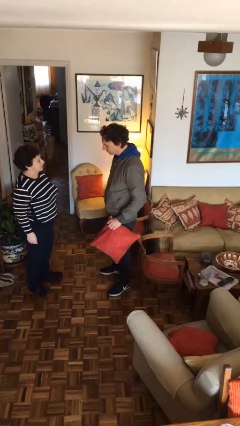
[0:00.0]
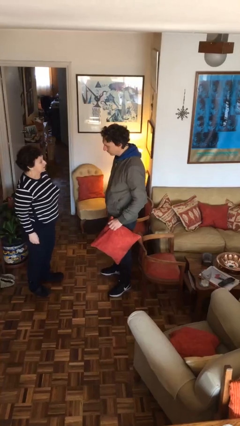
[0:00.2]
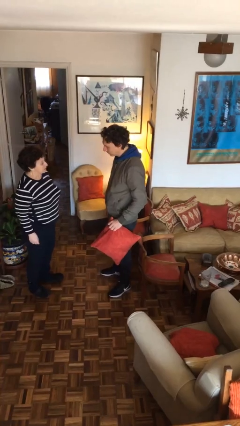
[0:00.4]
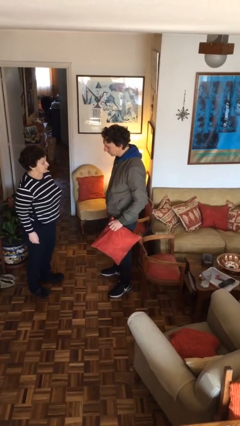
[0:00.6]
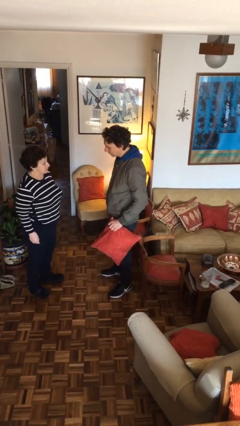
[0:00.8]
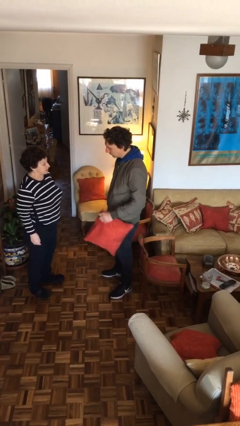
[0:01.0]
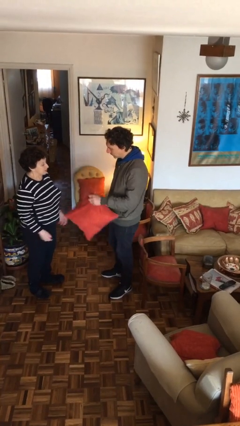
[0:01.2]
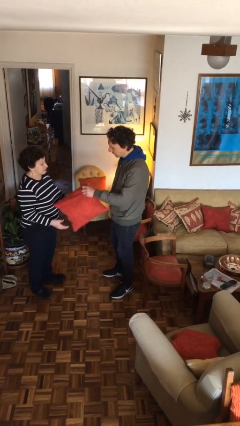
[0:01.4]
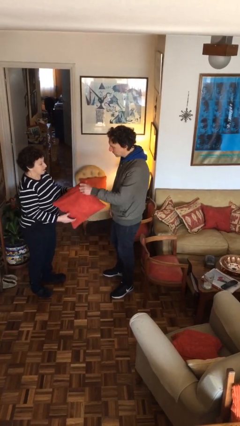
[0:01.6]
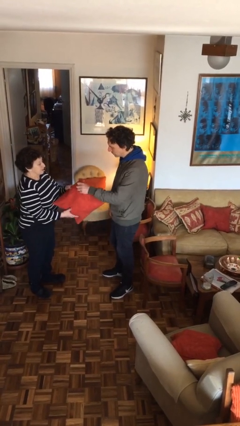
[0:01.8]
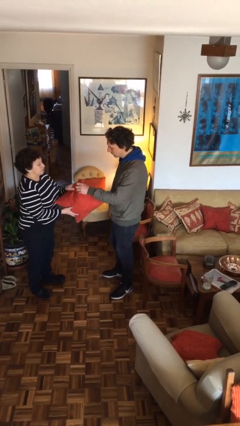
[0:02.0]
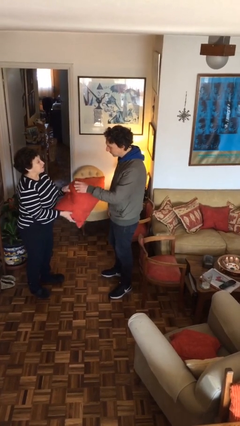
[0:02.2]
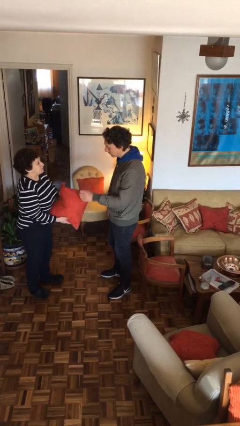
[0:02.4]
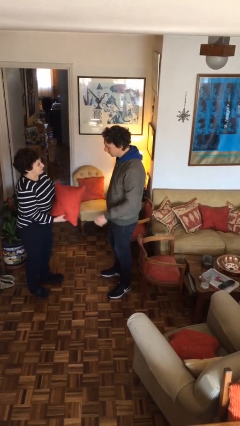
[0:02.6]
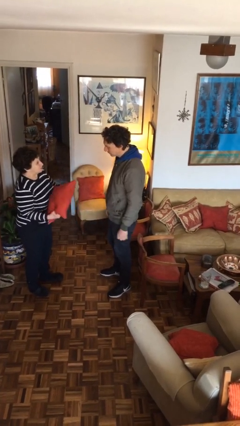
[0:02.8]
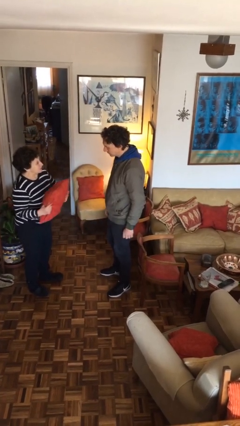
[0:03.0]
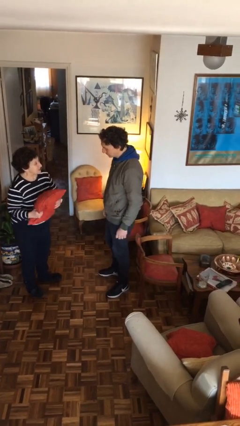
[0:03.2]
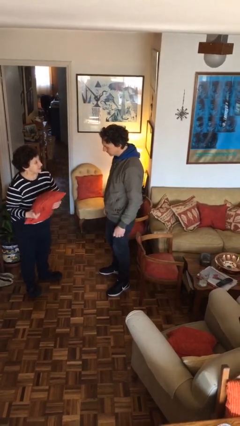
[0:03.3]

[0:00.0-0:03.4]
person transfers object to person

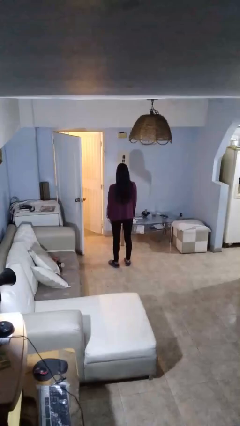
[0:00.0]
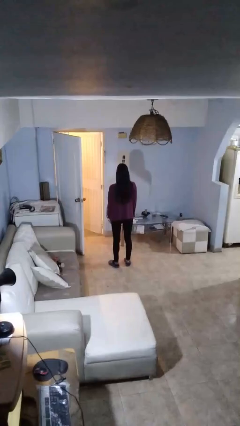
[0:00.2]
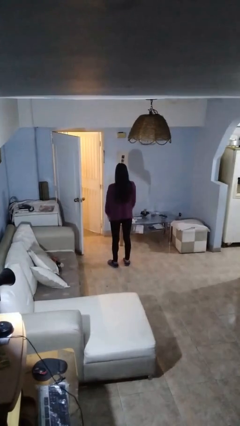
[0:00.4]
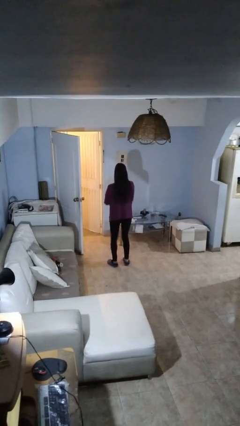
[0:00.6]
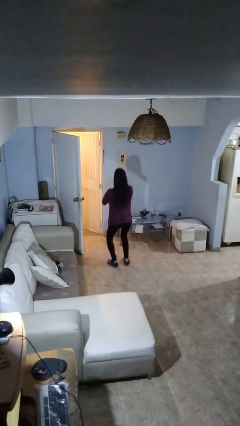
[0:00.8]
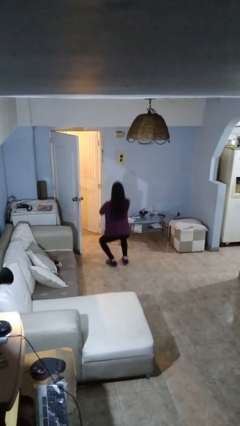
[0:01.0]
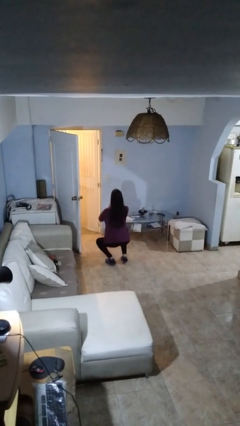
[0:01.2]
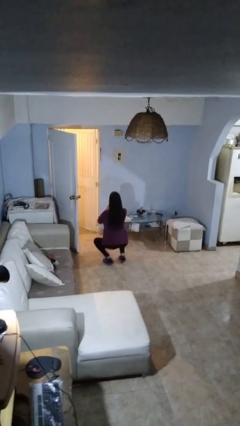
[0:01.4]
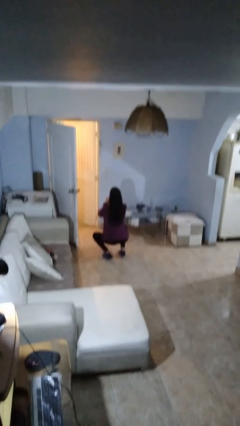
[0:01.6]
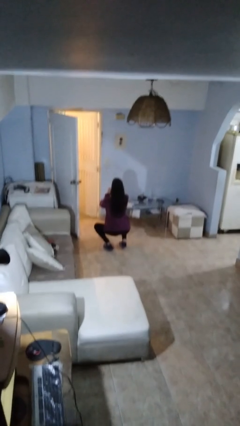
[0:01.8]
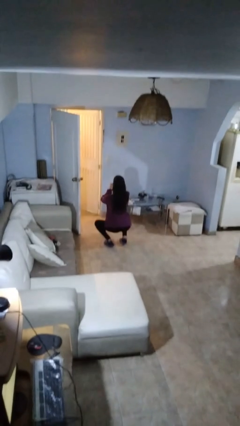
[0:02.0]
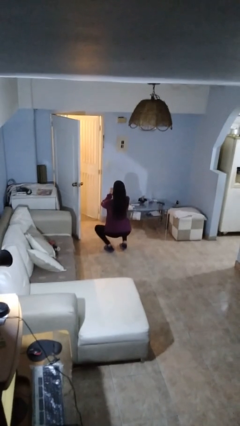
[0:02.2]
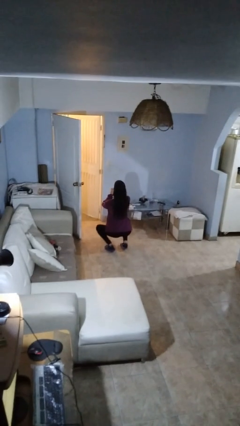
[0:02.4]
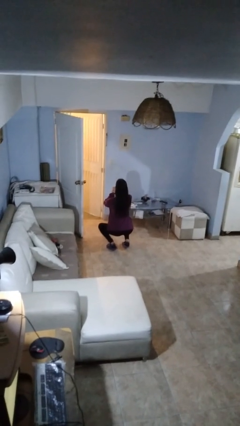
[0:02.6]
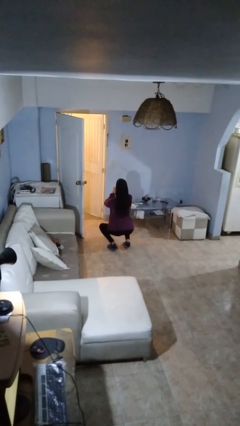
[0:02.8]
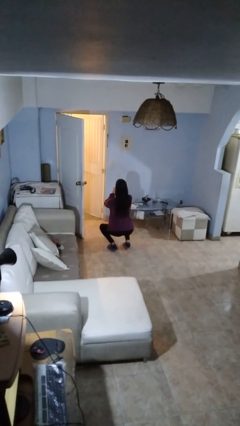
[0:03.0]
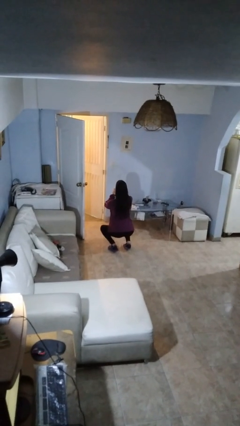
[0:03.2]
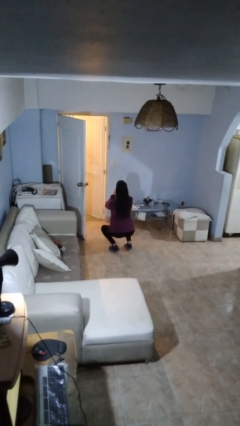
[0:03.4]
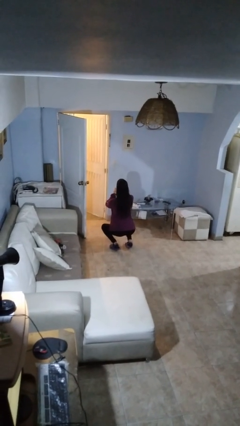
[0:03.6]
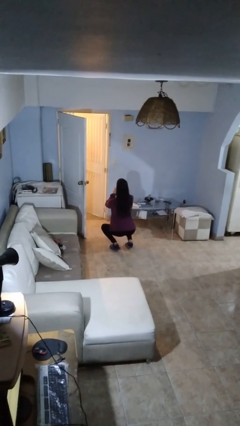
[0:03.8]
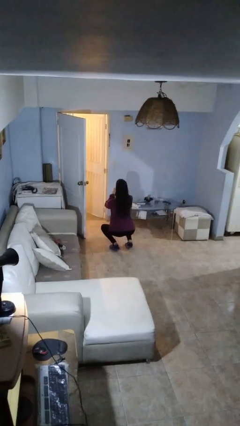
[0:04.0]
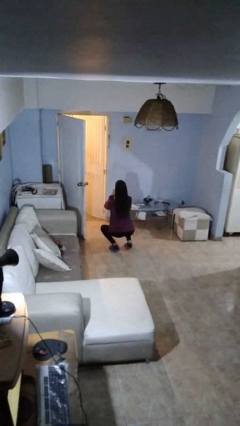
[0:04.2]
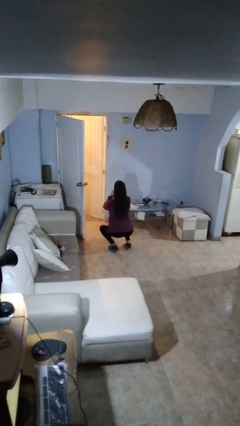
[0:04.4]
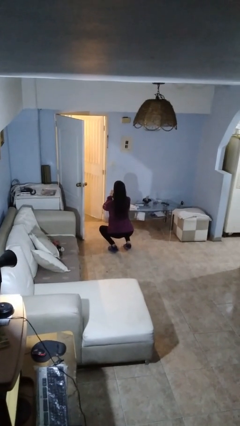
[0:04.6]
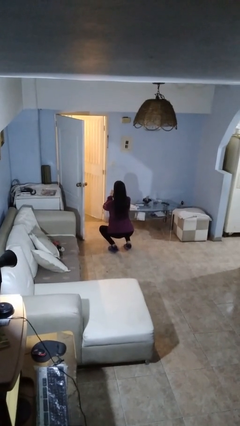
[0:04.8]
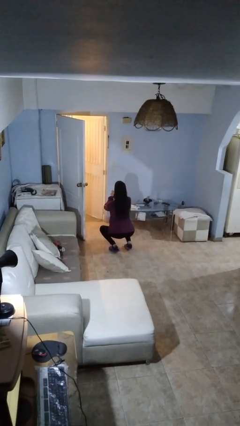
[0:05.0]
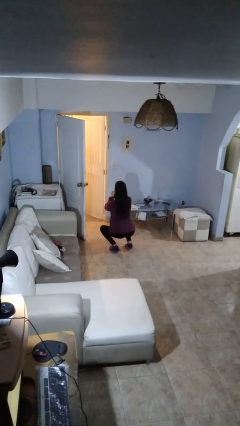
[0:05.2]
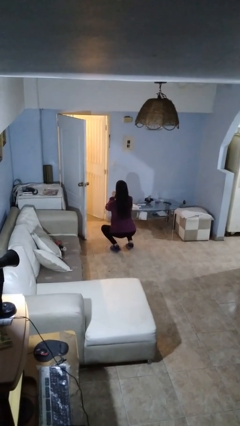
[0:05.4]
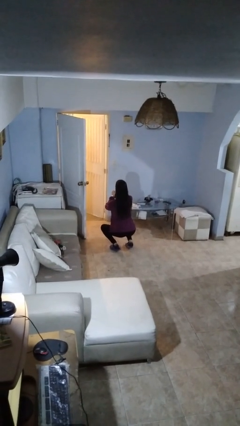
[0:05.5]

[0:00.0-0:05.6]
person squats

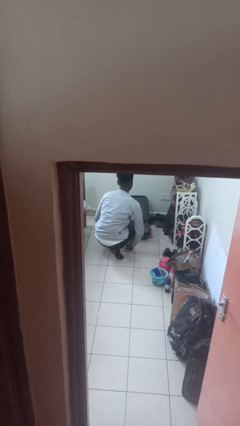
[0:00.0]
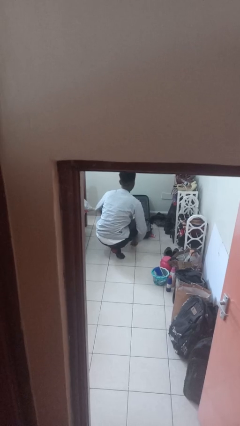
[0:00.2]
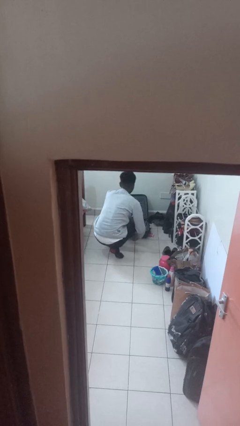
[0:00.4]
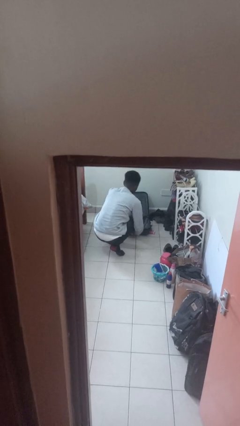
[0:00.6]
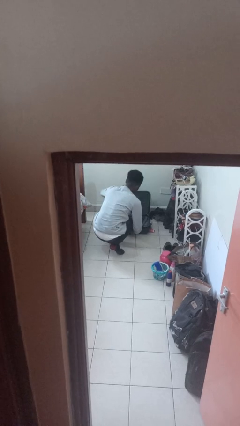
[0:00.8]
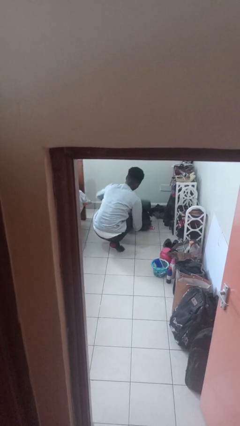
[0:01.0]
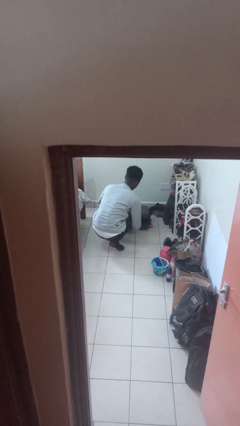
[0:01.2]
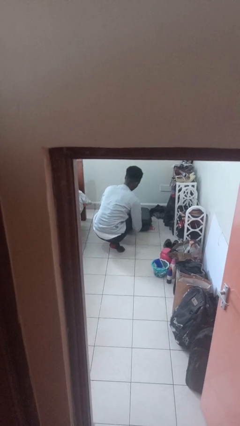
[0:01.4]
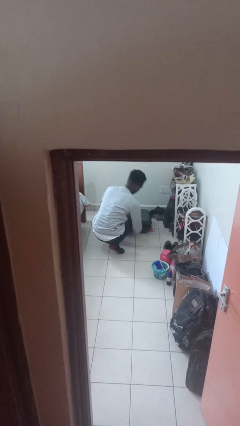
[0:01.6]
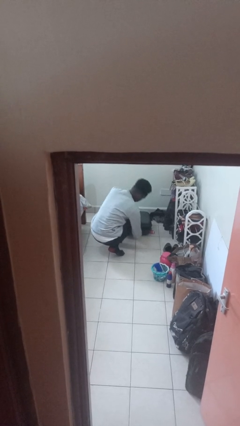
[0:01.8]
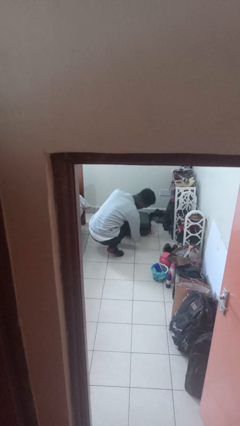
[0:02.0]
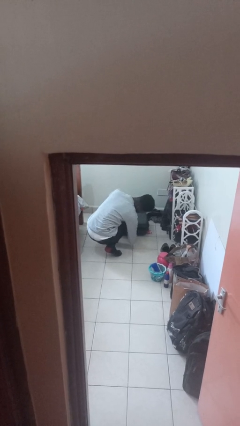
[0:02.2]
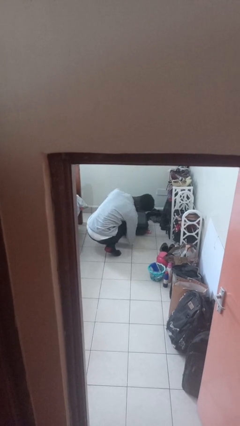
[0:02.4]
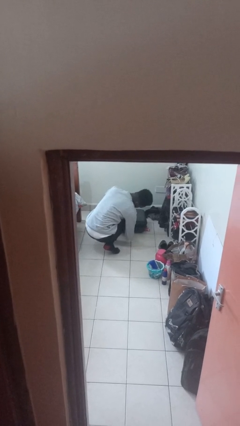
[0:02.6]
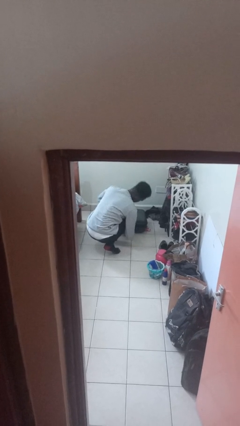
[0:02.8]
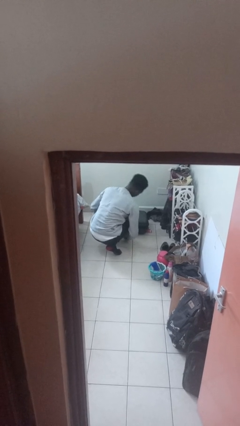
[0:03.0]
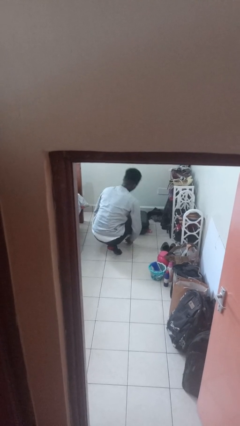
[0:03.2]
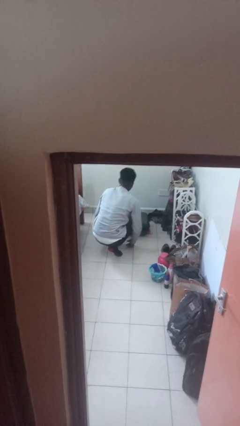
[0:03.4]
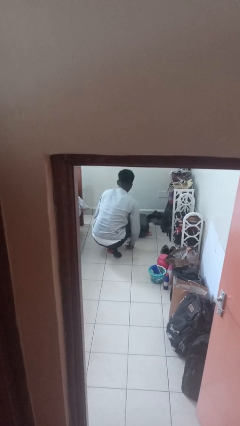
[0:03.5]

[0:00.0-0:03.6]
person closes suitcase

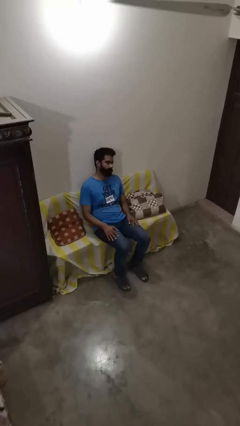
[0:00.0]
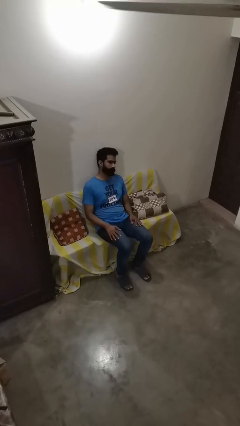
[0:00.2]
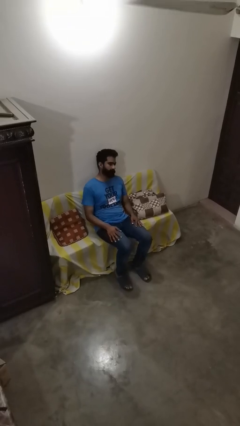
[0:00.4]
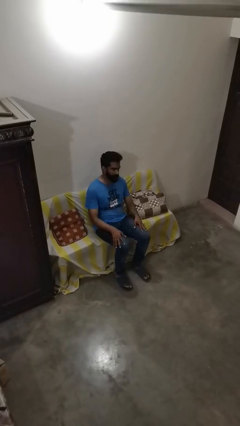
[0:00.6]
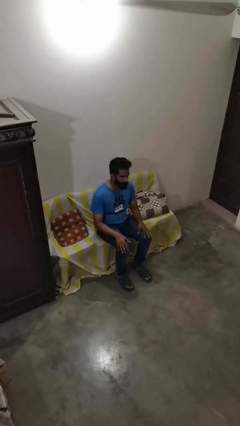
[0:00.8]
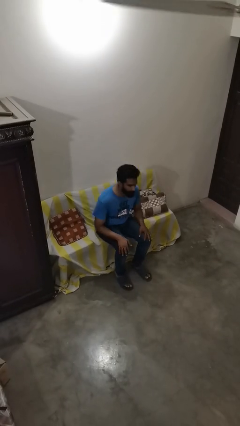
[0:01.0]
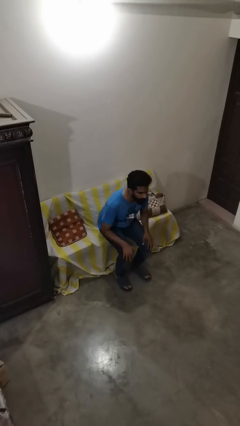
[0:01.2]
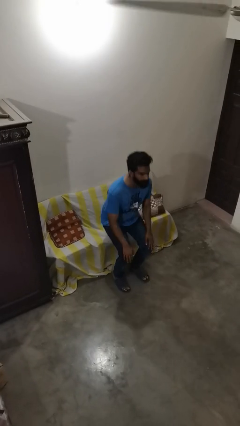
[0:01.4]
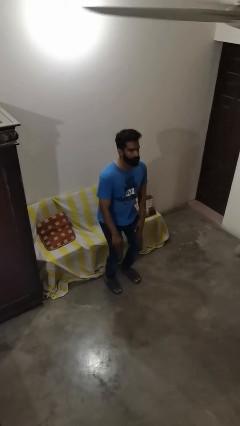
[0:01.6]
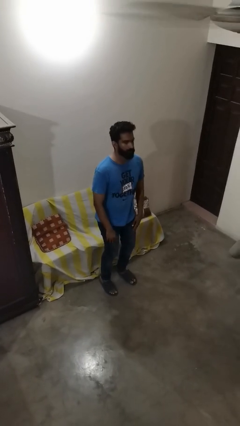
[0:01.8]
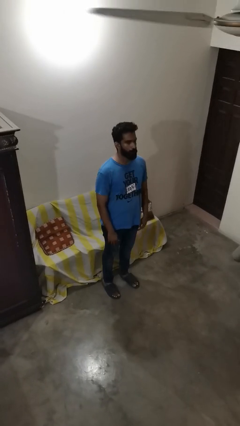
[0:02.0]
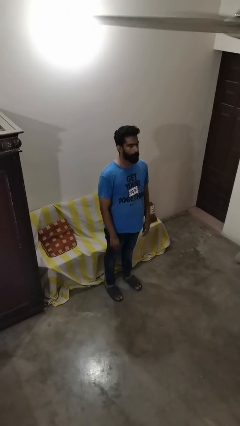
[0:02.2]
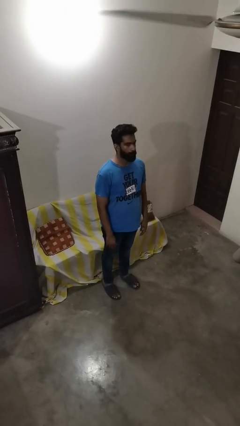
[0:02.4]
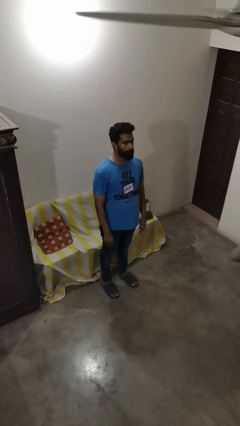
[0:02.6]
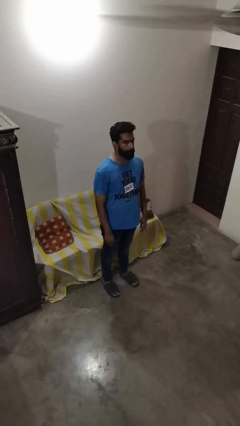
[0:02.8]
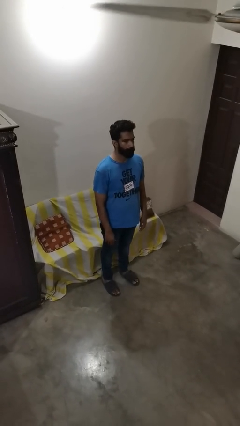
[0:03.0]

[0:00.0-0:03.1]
person stands up

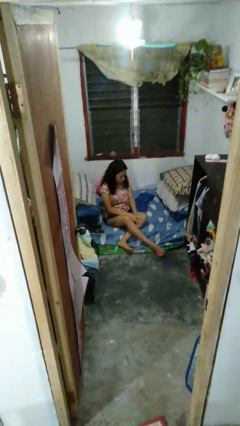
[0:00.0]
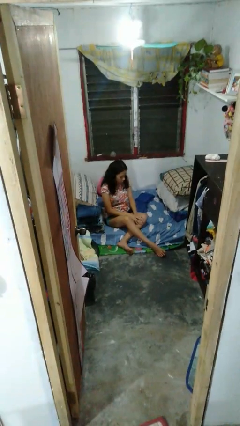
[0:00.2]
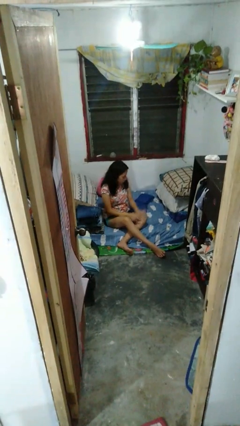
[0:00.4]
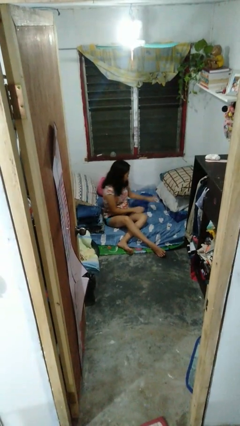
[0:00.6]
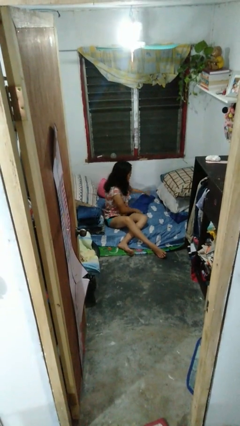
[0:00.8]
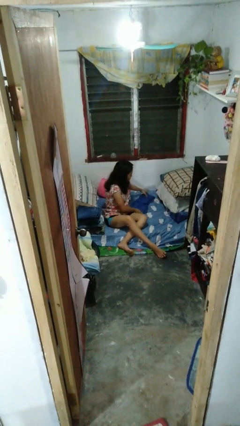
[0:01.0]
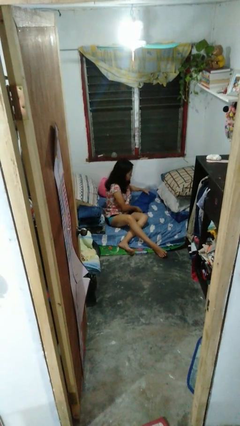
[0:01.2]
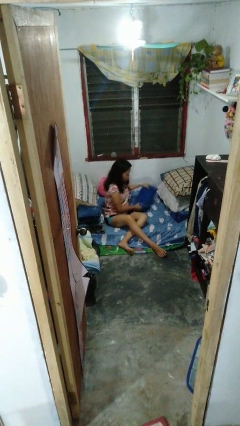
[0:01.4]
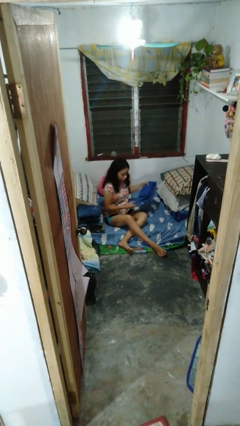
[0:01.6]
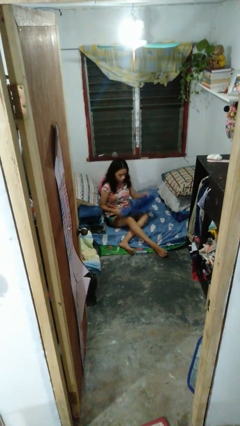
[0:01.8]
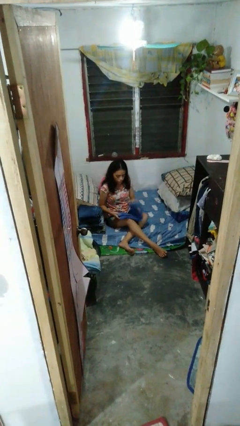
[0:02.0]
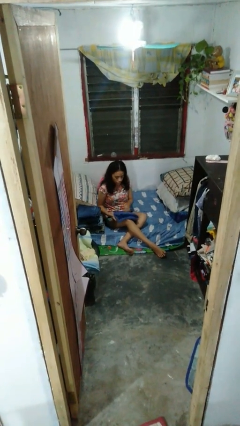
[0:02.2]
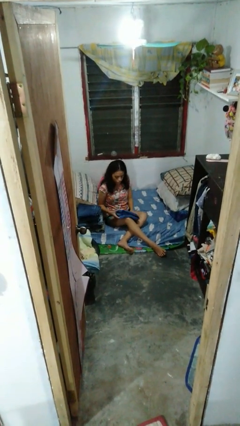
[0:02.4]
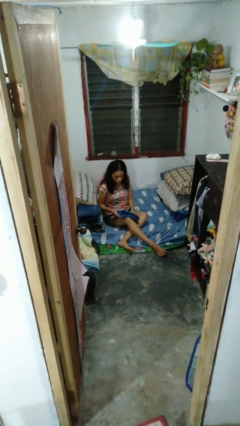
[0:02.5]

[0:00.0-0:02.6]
person folds pants
